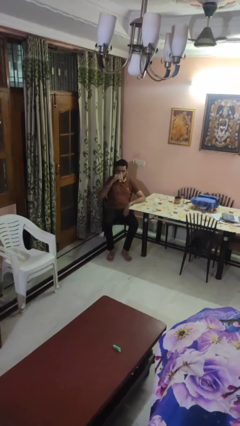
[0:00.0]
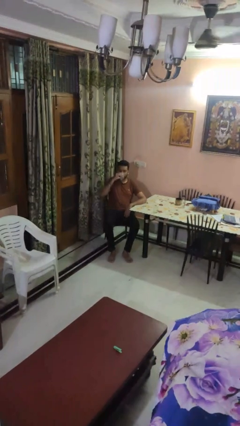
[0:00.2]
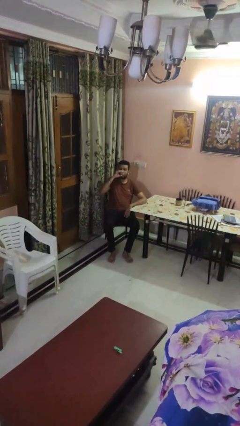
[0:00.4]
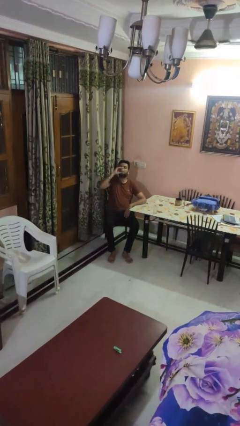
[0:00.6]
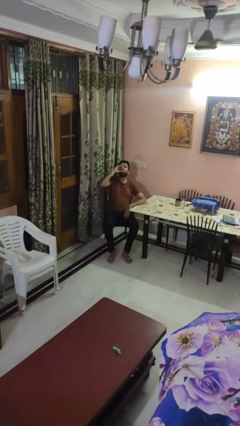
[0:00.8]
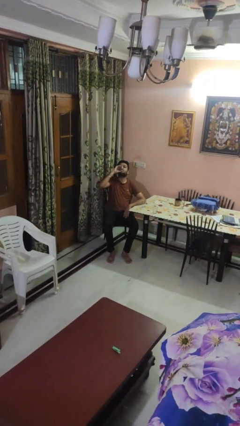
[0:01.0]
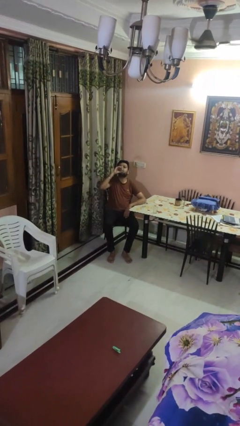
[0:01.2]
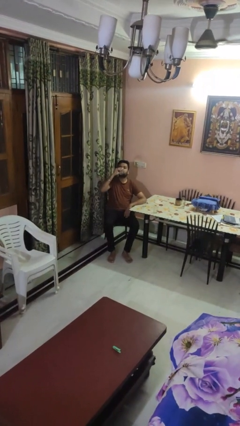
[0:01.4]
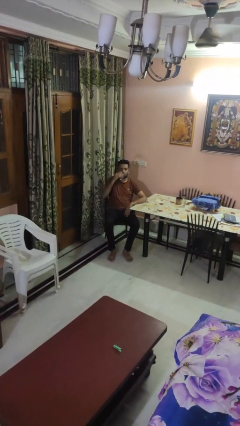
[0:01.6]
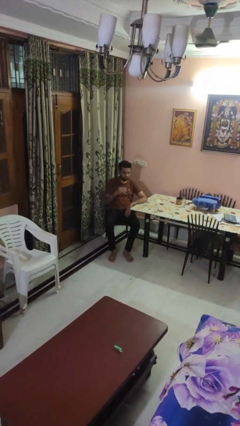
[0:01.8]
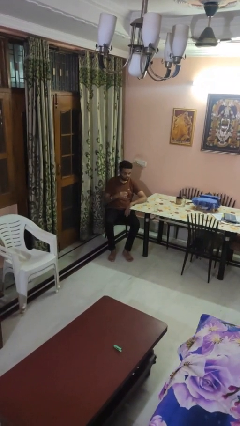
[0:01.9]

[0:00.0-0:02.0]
person drinks from shotglass

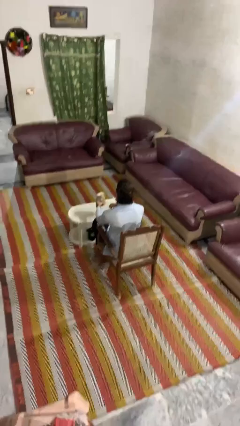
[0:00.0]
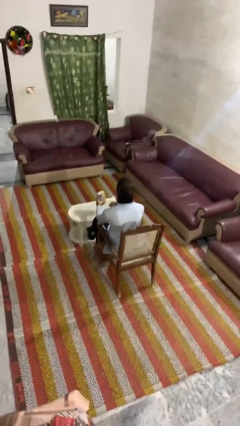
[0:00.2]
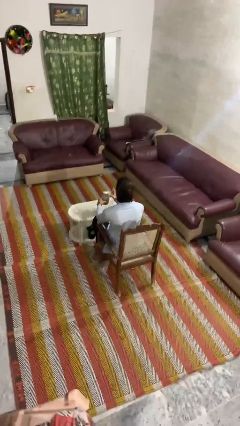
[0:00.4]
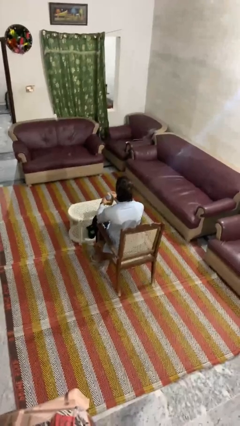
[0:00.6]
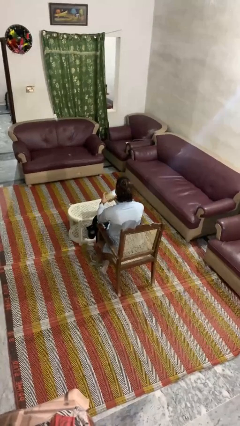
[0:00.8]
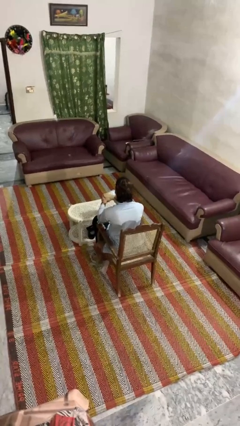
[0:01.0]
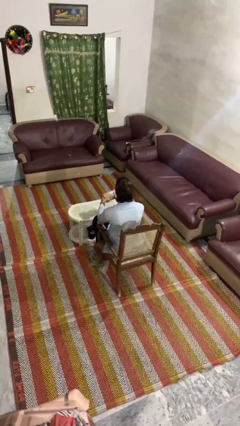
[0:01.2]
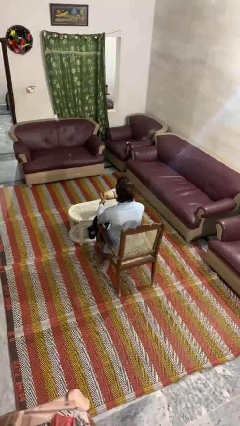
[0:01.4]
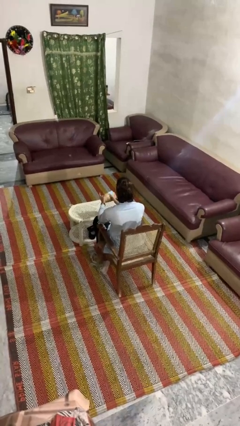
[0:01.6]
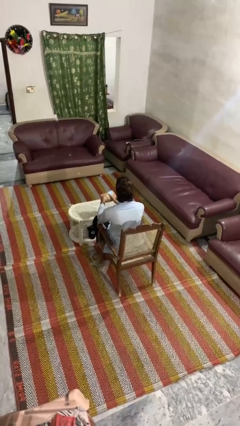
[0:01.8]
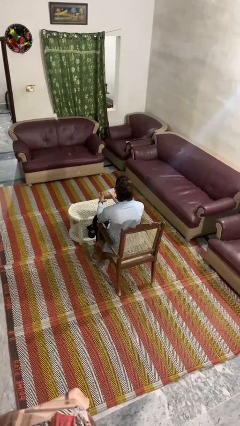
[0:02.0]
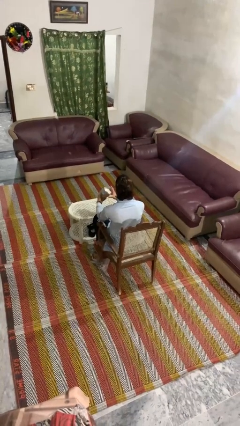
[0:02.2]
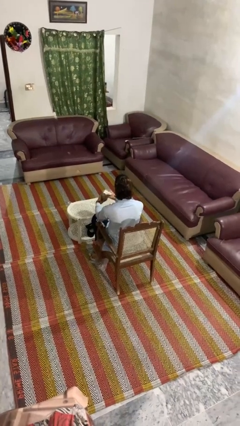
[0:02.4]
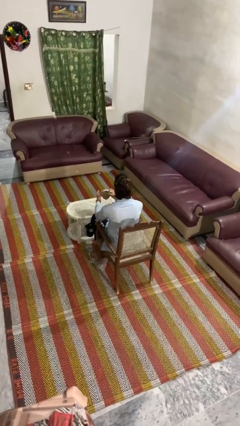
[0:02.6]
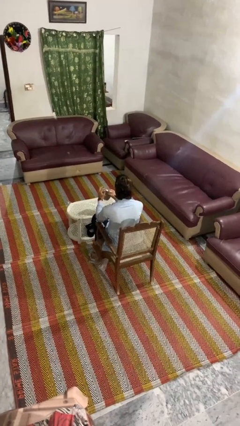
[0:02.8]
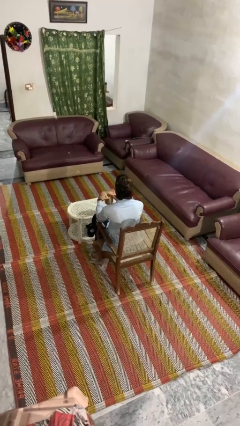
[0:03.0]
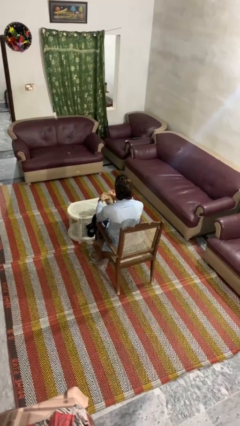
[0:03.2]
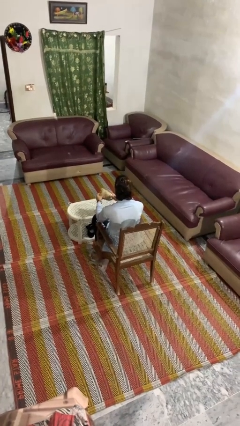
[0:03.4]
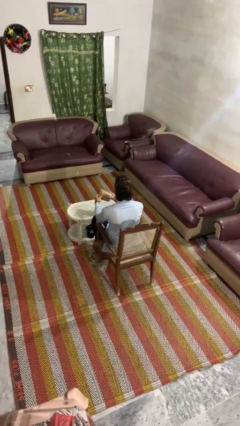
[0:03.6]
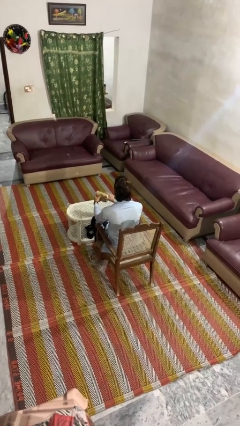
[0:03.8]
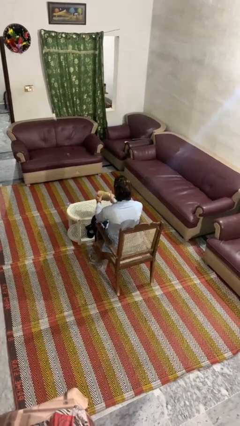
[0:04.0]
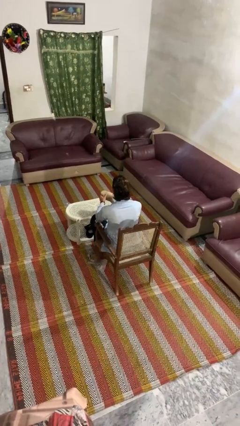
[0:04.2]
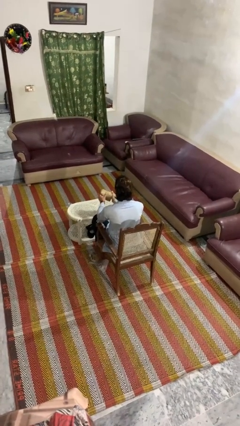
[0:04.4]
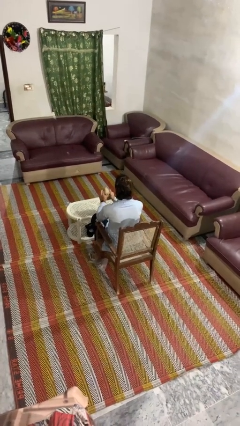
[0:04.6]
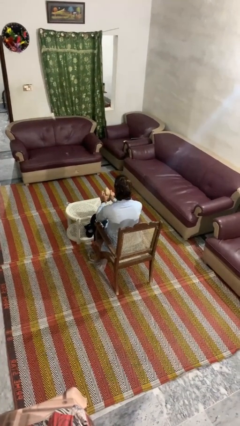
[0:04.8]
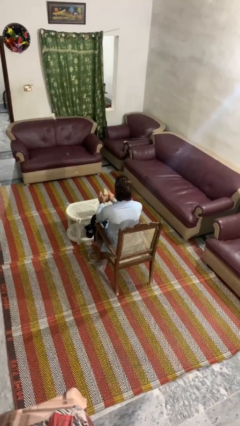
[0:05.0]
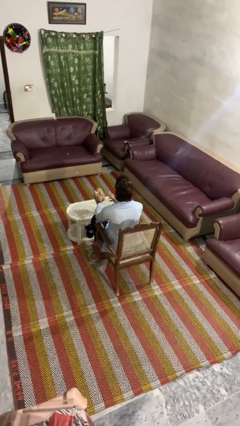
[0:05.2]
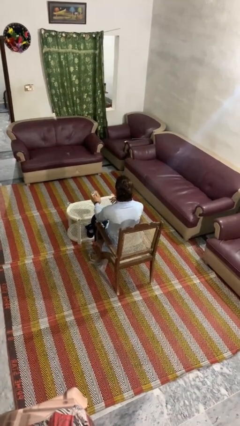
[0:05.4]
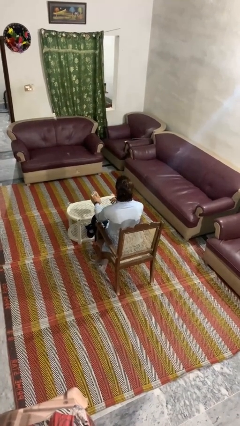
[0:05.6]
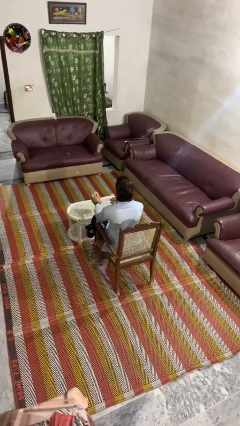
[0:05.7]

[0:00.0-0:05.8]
person squeezes object

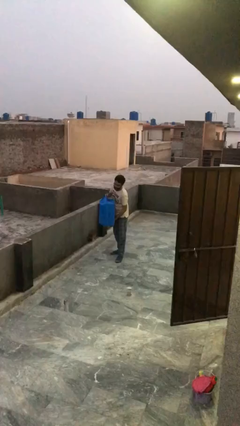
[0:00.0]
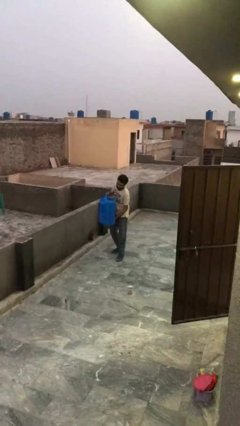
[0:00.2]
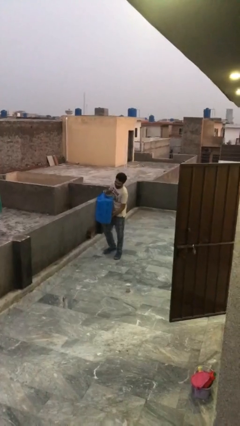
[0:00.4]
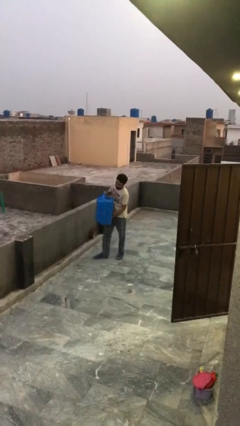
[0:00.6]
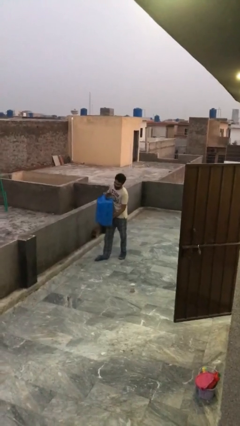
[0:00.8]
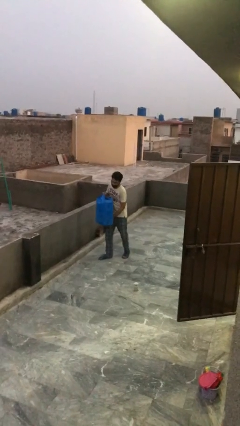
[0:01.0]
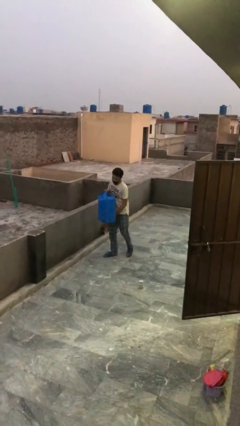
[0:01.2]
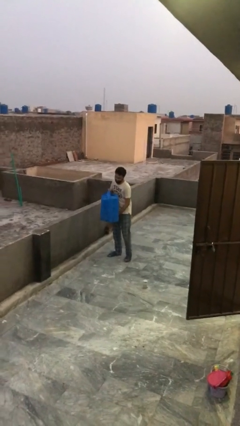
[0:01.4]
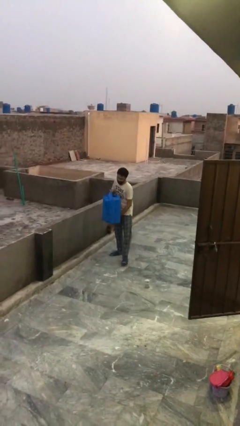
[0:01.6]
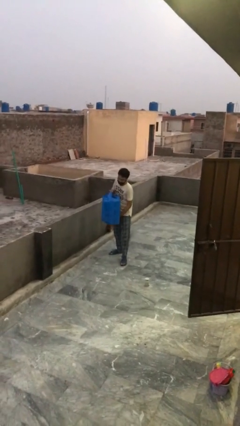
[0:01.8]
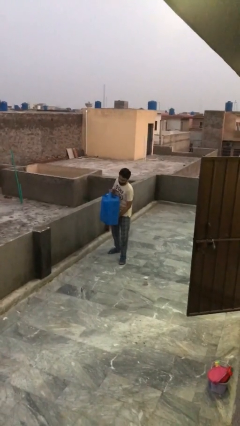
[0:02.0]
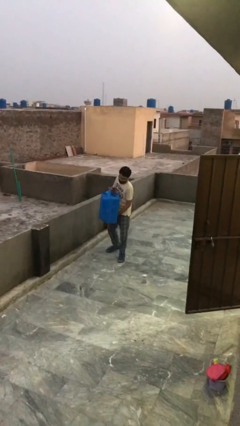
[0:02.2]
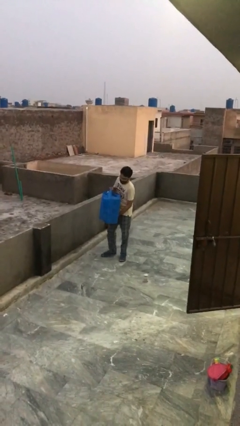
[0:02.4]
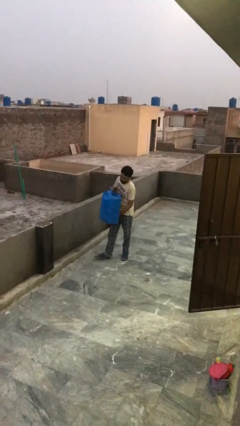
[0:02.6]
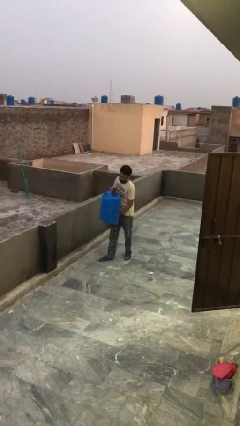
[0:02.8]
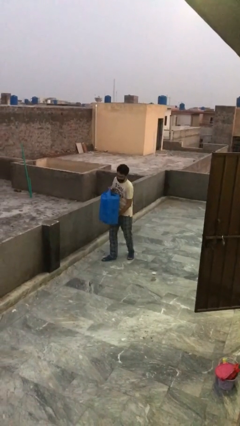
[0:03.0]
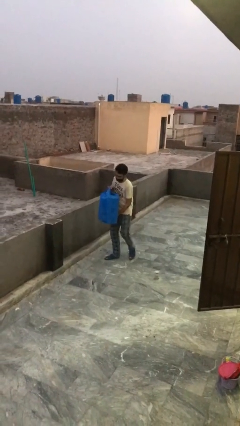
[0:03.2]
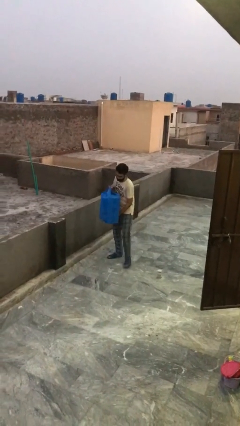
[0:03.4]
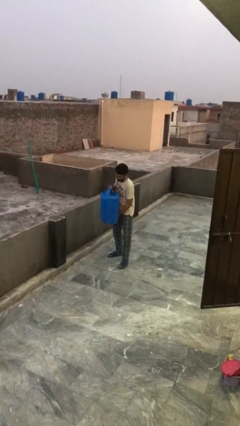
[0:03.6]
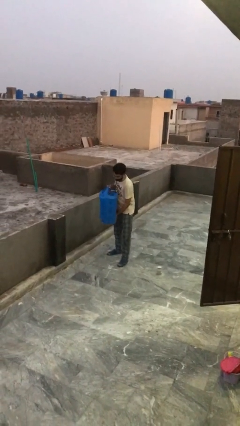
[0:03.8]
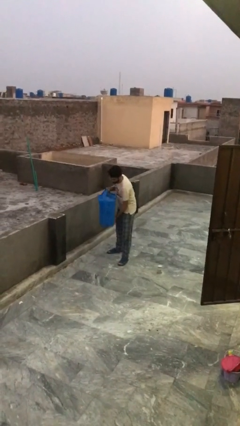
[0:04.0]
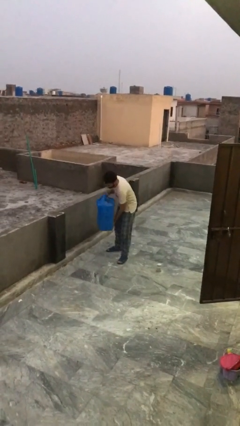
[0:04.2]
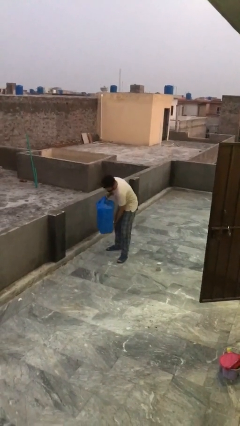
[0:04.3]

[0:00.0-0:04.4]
person carries heavy object

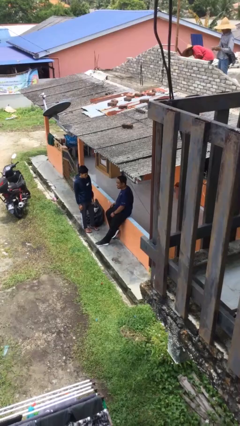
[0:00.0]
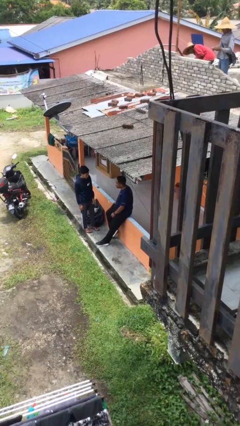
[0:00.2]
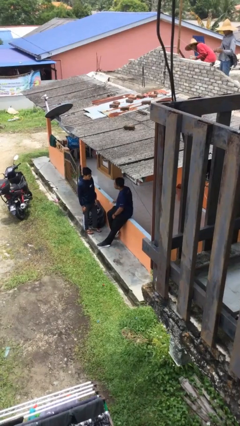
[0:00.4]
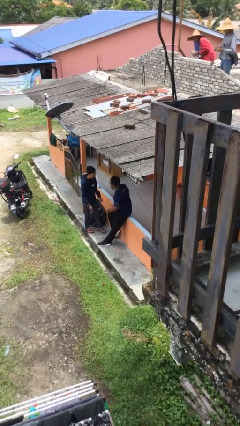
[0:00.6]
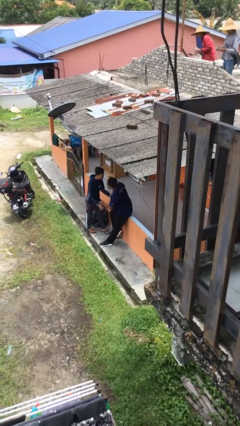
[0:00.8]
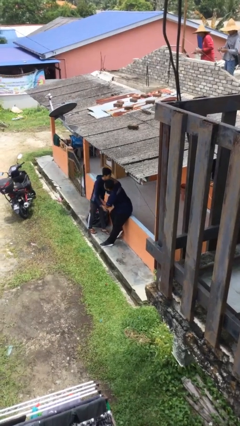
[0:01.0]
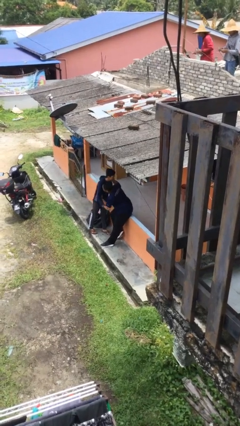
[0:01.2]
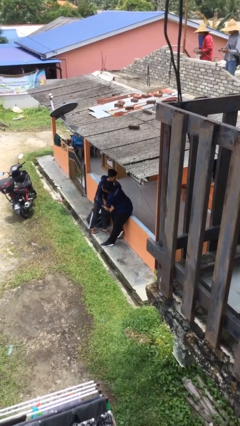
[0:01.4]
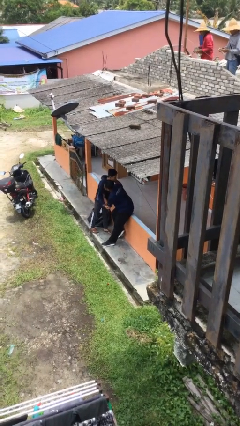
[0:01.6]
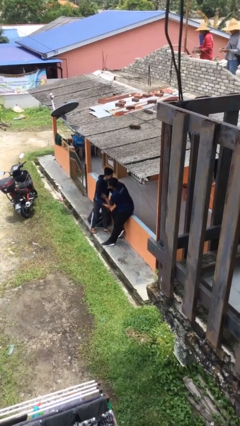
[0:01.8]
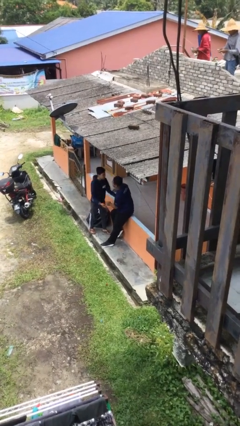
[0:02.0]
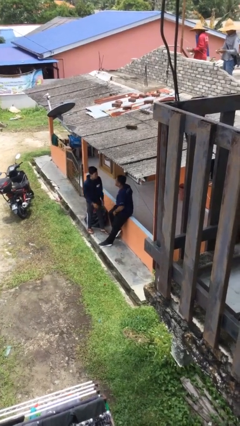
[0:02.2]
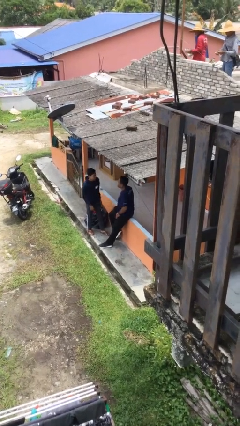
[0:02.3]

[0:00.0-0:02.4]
person embraces person

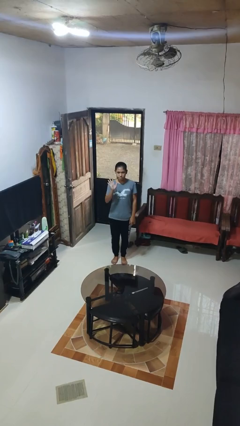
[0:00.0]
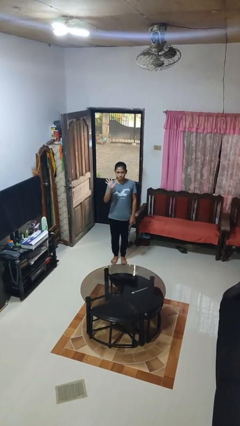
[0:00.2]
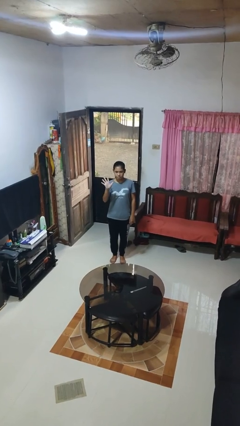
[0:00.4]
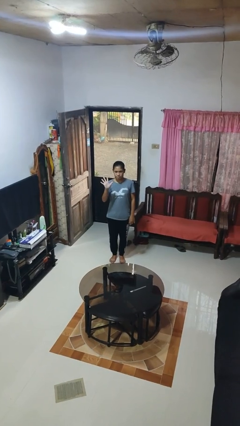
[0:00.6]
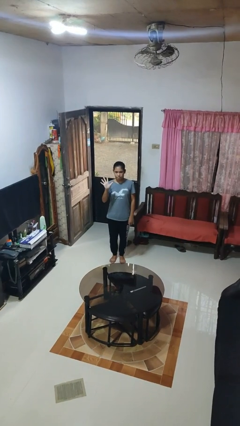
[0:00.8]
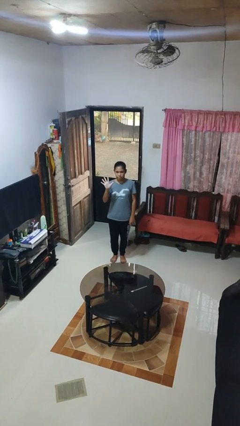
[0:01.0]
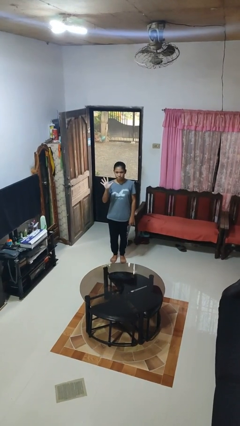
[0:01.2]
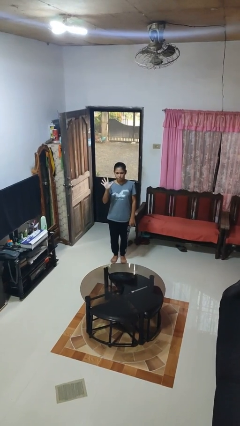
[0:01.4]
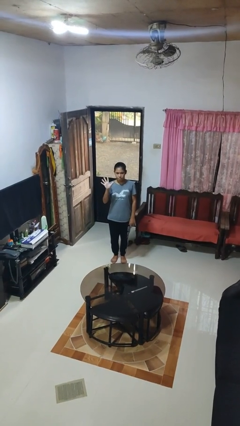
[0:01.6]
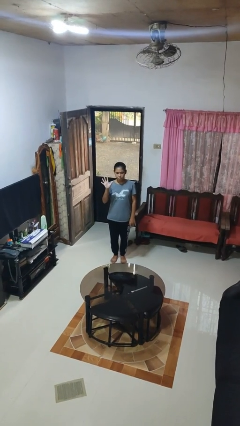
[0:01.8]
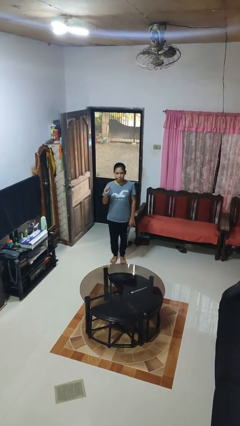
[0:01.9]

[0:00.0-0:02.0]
person gestures number five

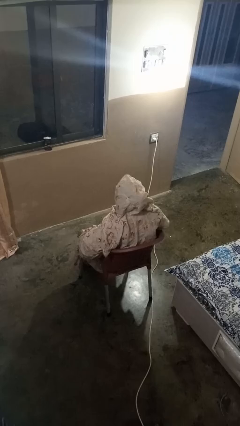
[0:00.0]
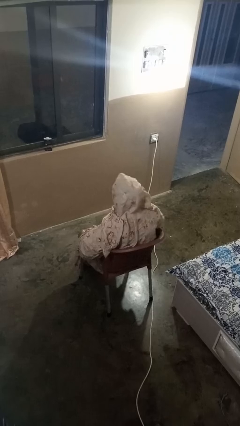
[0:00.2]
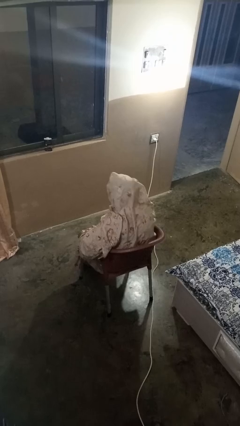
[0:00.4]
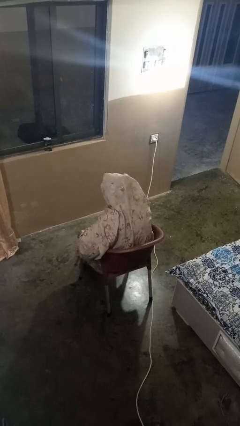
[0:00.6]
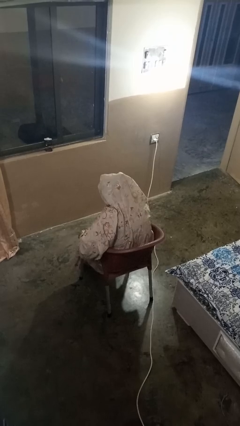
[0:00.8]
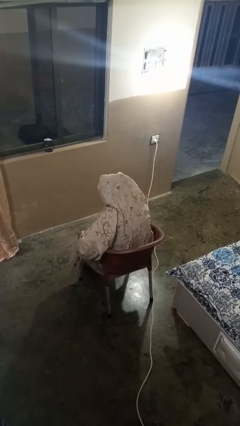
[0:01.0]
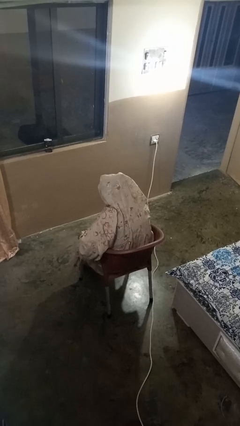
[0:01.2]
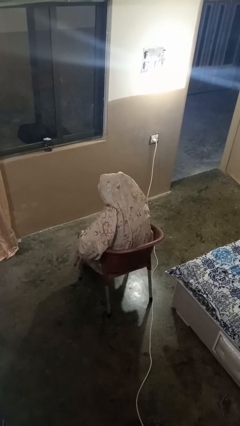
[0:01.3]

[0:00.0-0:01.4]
person looks at hands in lap
